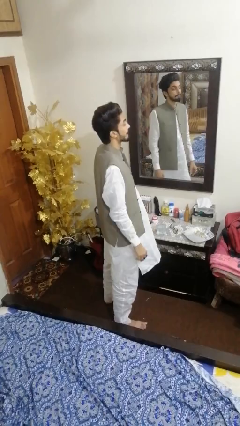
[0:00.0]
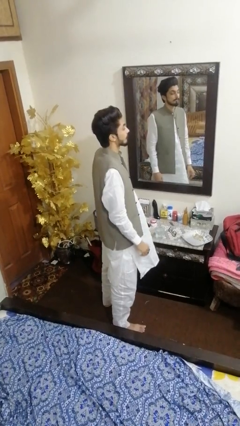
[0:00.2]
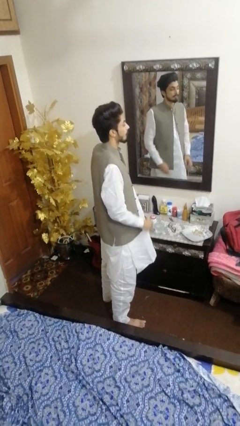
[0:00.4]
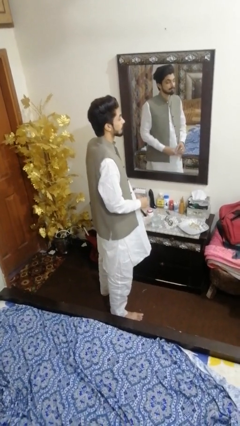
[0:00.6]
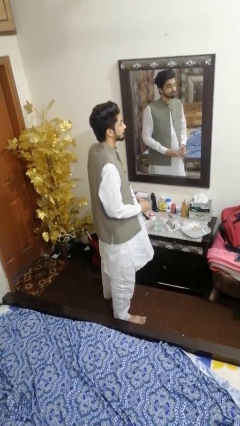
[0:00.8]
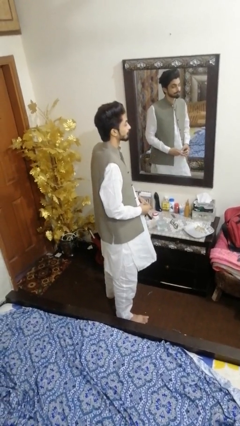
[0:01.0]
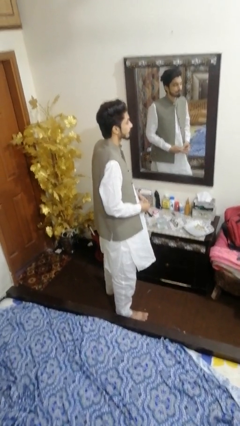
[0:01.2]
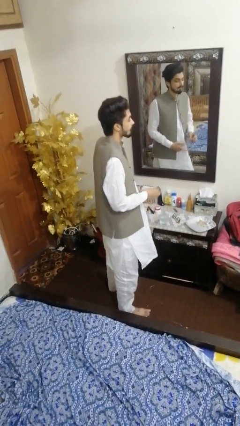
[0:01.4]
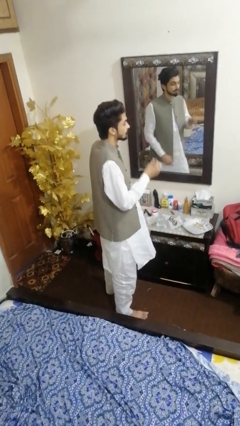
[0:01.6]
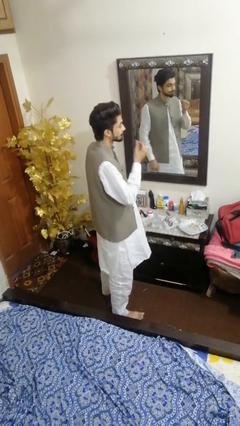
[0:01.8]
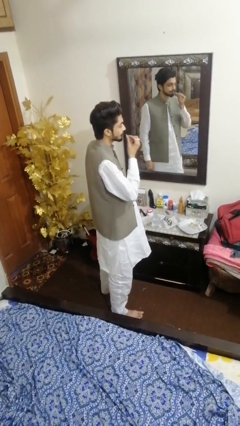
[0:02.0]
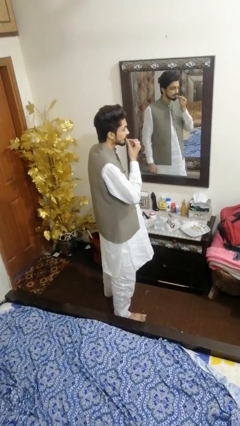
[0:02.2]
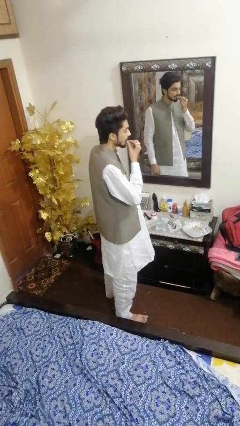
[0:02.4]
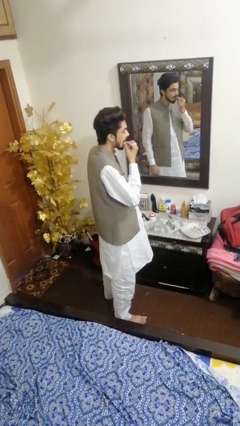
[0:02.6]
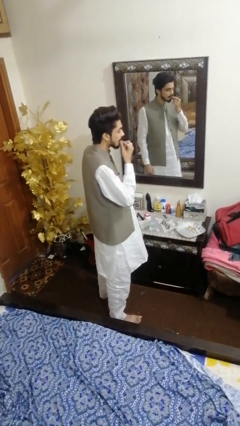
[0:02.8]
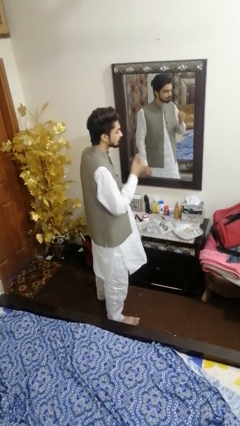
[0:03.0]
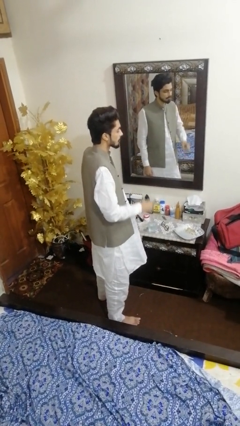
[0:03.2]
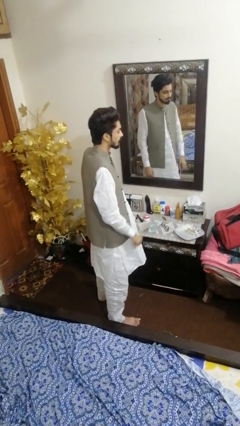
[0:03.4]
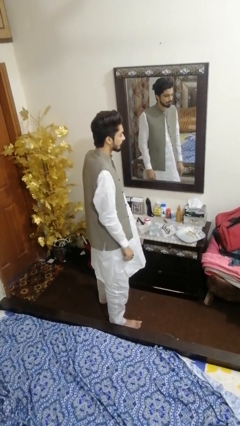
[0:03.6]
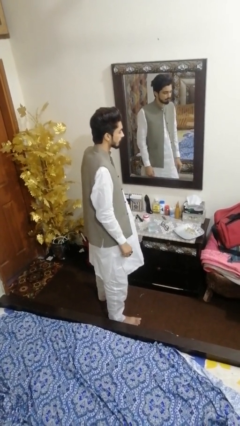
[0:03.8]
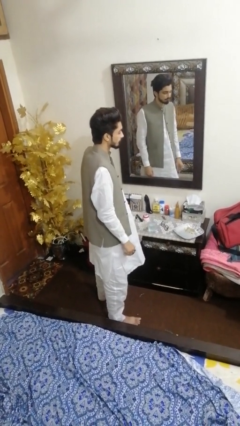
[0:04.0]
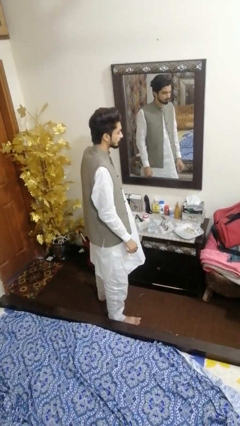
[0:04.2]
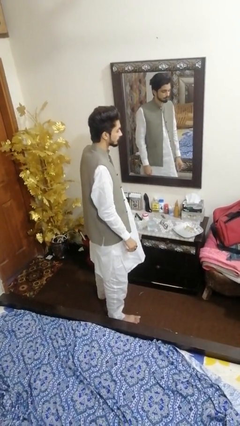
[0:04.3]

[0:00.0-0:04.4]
person takes medicine pills

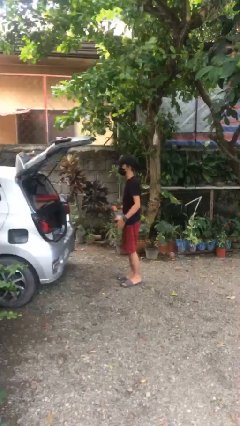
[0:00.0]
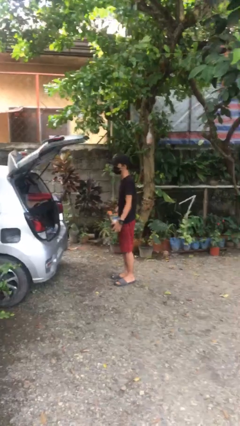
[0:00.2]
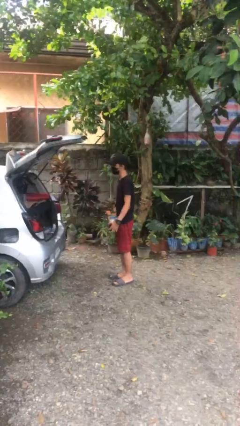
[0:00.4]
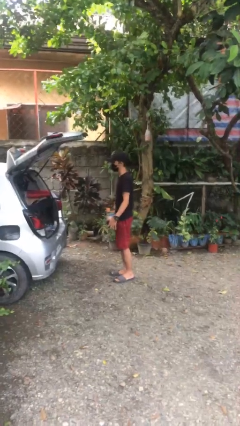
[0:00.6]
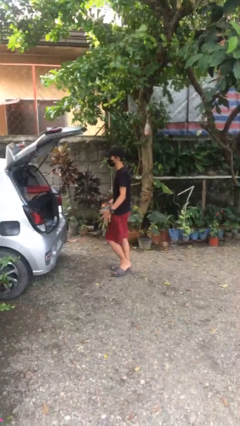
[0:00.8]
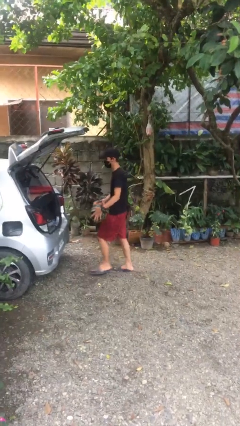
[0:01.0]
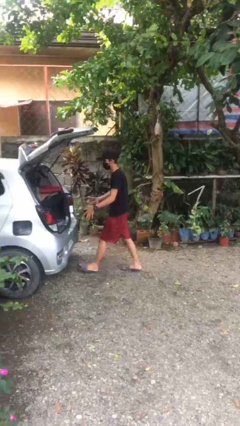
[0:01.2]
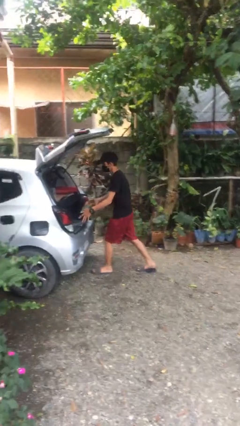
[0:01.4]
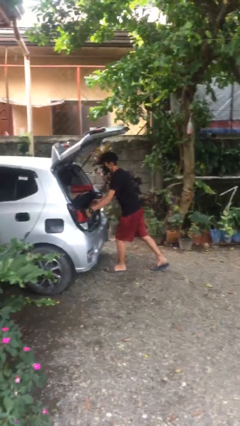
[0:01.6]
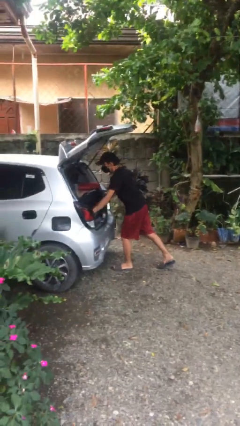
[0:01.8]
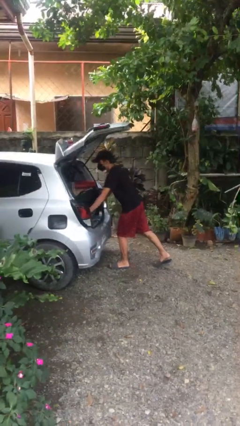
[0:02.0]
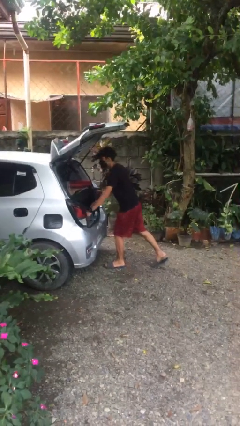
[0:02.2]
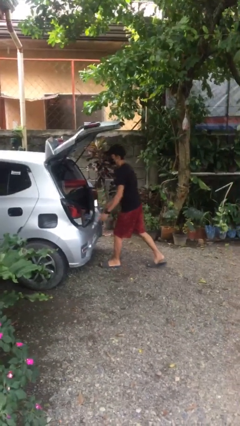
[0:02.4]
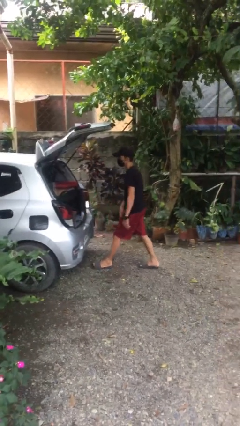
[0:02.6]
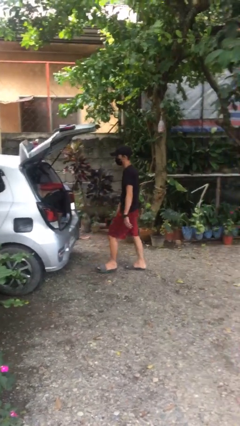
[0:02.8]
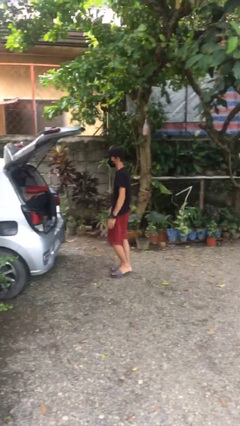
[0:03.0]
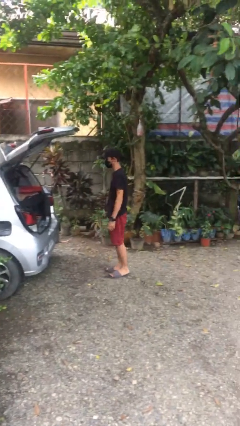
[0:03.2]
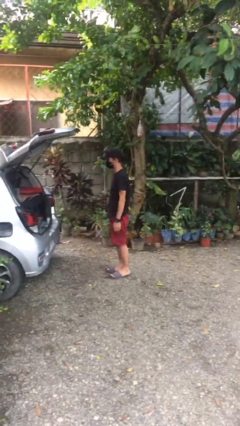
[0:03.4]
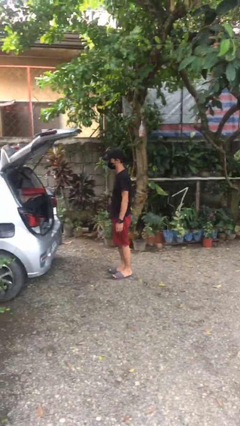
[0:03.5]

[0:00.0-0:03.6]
person loads car

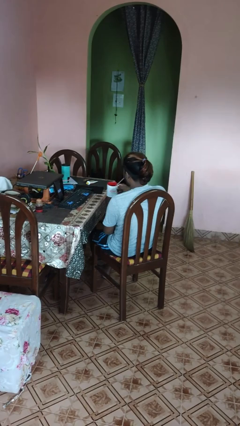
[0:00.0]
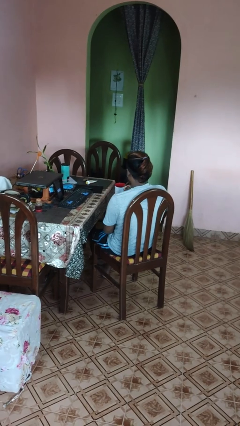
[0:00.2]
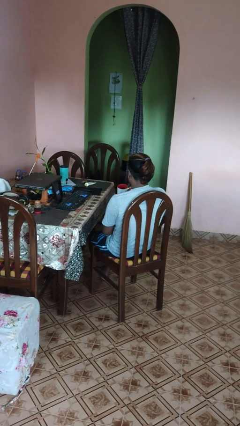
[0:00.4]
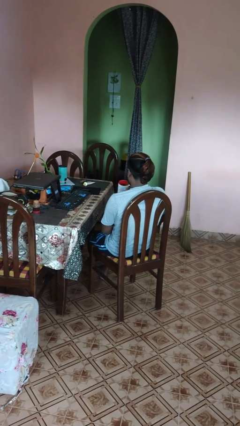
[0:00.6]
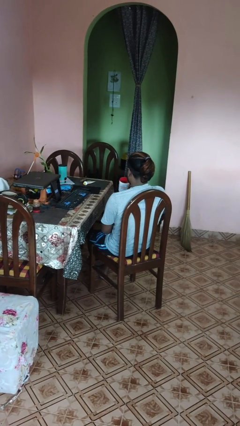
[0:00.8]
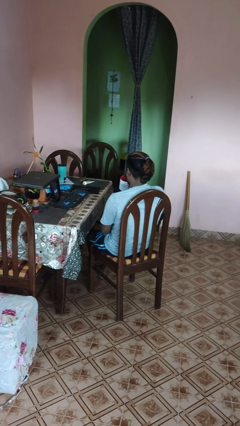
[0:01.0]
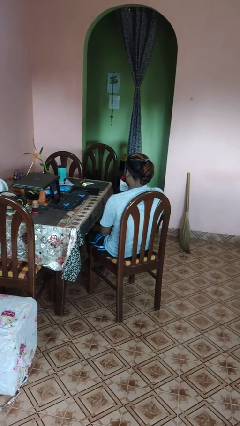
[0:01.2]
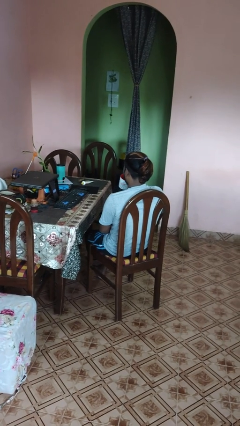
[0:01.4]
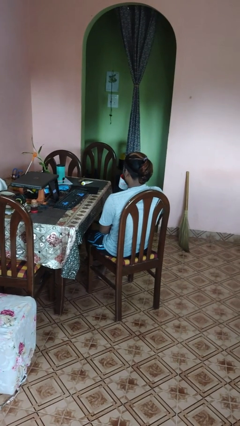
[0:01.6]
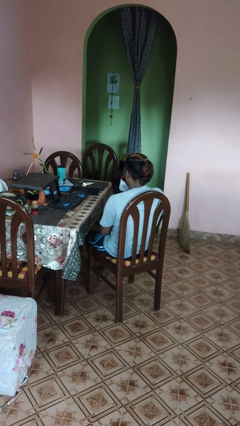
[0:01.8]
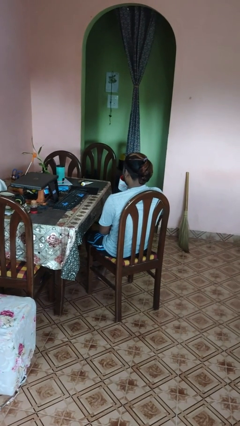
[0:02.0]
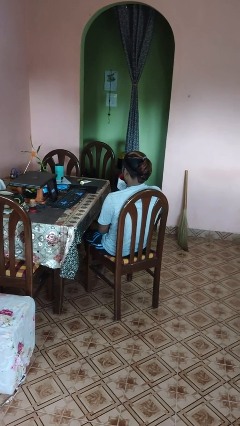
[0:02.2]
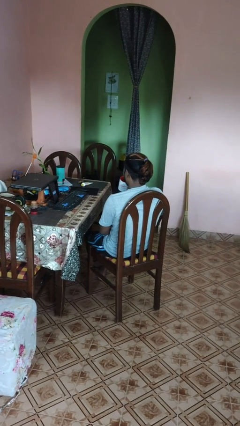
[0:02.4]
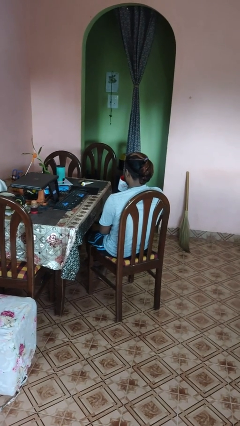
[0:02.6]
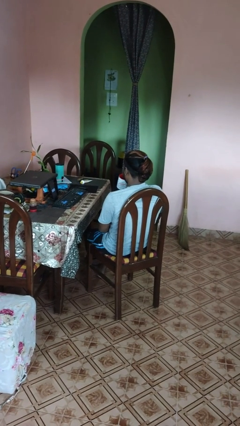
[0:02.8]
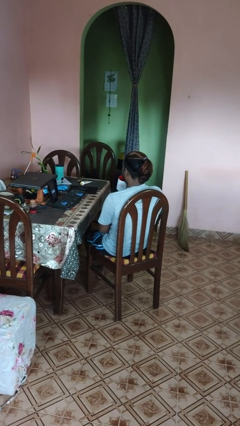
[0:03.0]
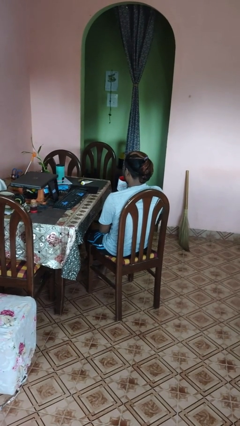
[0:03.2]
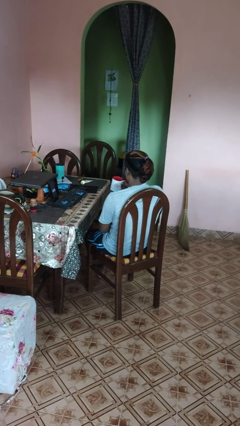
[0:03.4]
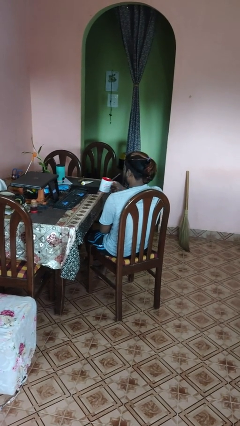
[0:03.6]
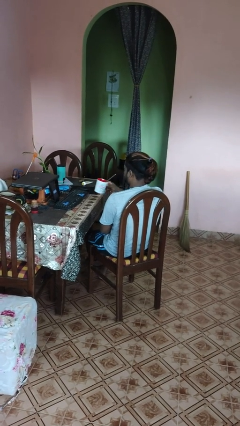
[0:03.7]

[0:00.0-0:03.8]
person drinks from straw

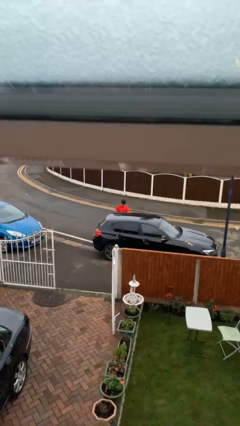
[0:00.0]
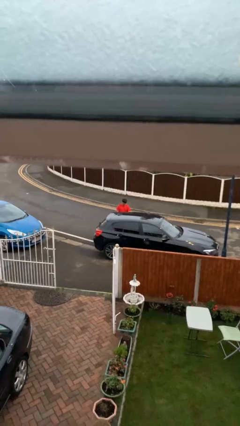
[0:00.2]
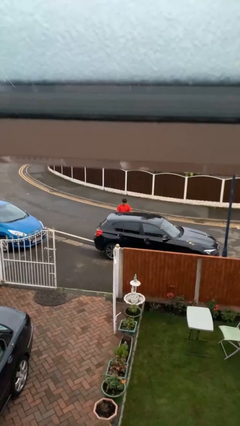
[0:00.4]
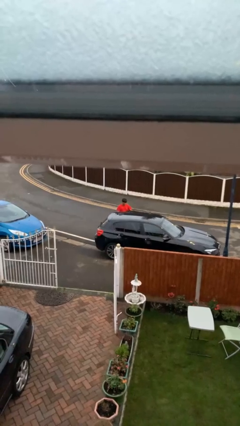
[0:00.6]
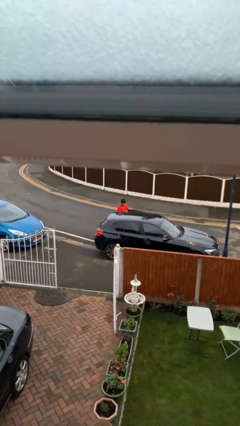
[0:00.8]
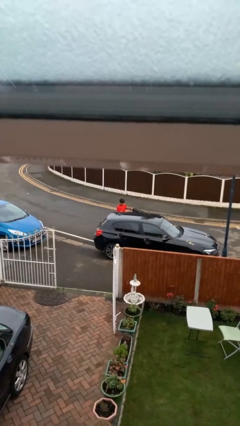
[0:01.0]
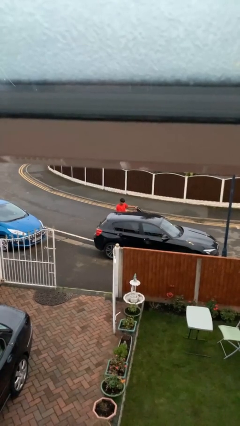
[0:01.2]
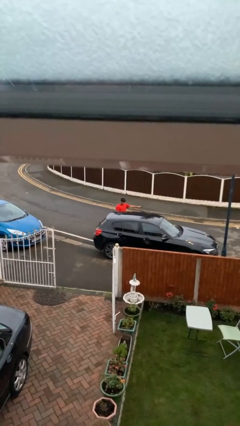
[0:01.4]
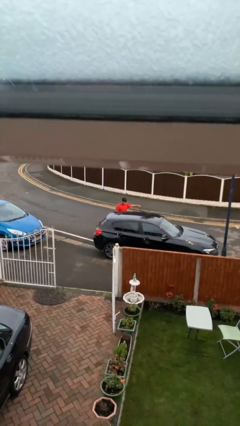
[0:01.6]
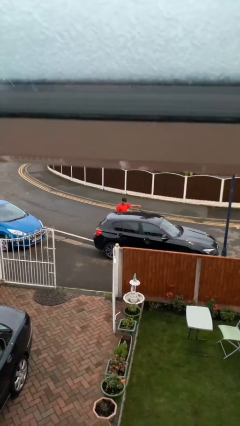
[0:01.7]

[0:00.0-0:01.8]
person opens car door

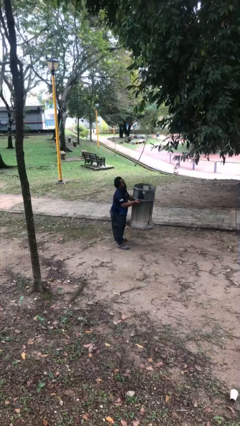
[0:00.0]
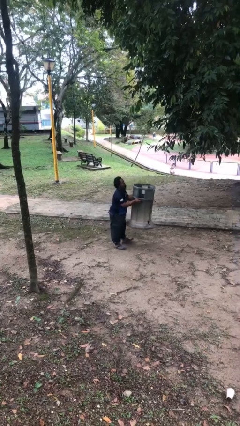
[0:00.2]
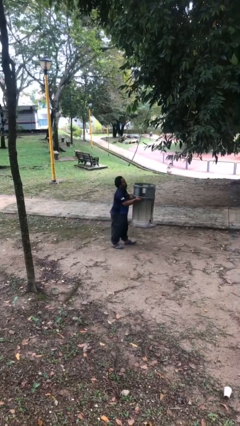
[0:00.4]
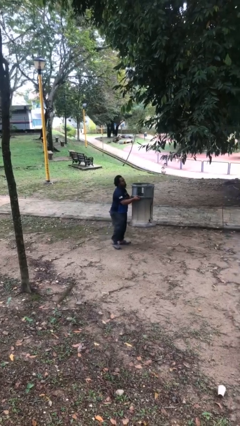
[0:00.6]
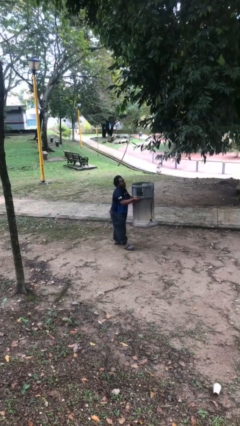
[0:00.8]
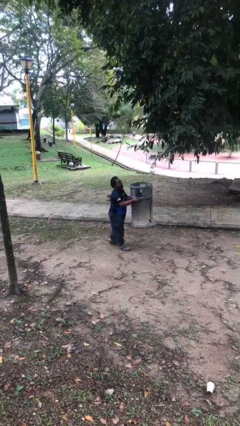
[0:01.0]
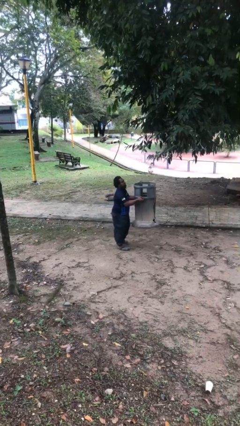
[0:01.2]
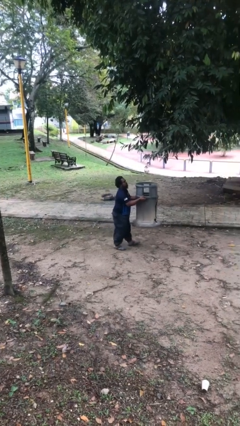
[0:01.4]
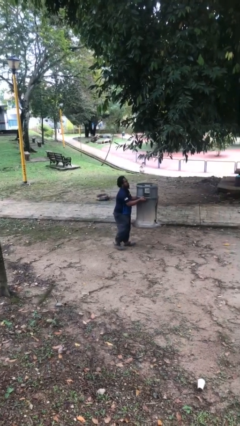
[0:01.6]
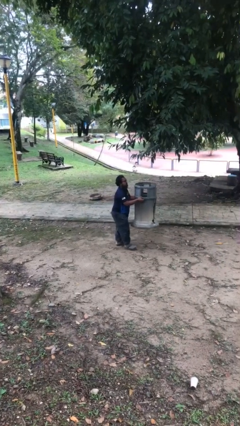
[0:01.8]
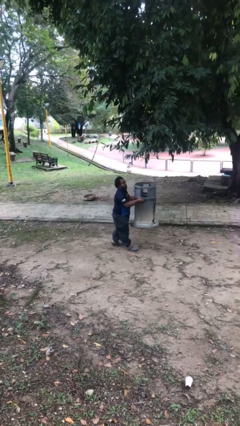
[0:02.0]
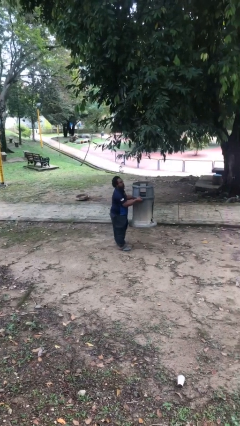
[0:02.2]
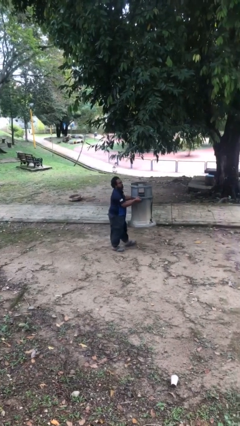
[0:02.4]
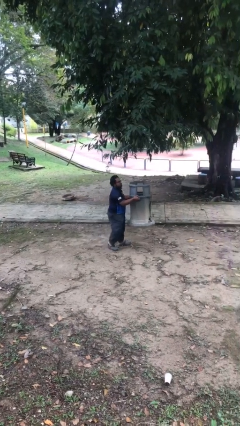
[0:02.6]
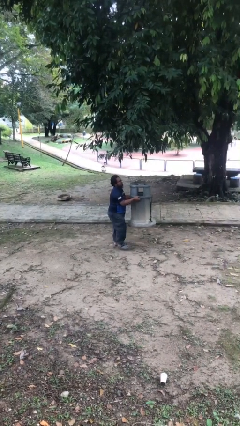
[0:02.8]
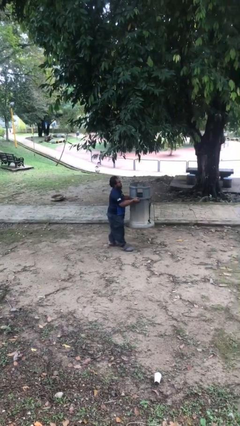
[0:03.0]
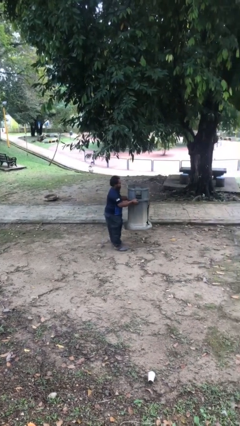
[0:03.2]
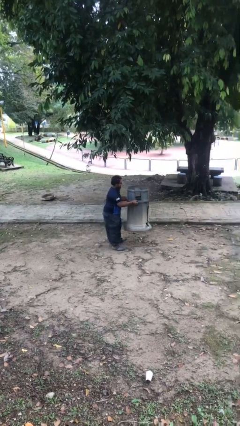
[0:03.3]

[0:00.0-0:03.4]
person carries heavy object

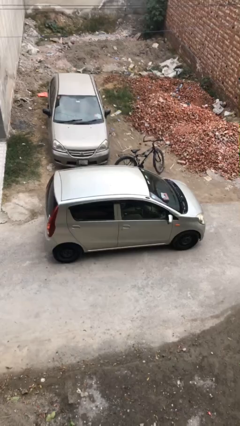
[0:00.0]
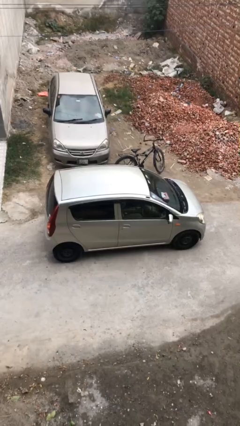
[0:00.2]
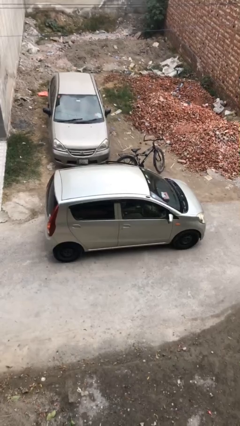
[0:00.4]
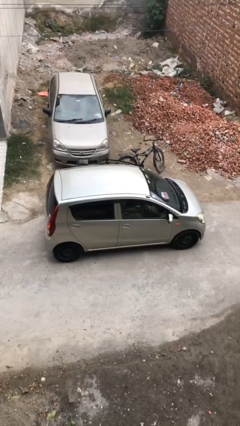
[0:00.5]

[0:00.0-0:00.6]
car drops off person

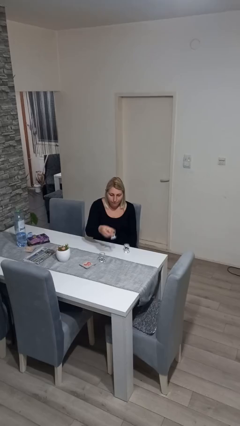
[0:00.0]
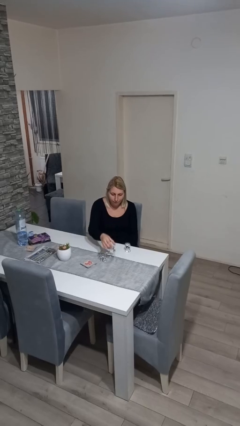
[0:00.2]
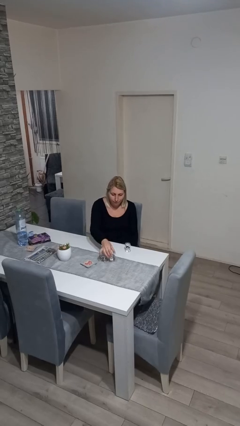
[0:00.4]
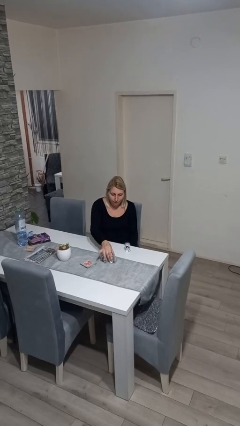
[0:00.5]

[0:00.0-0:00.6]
person puts down object on table
